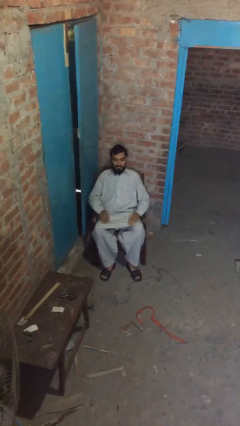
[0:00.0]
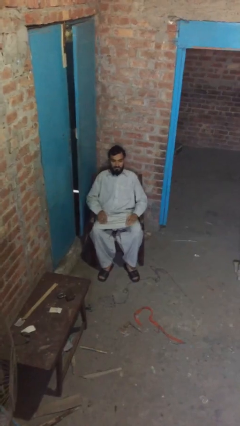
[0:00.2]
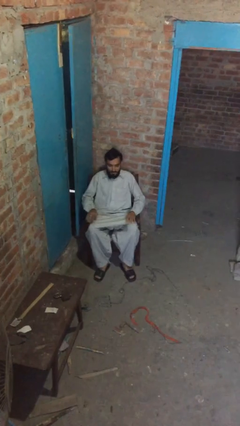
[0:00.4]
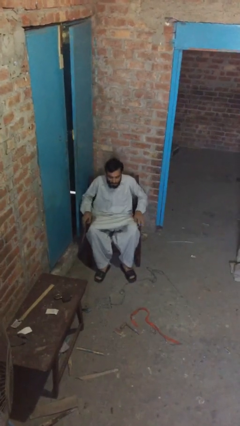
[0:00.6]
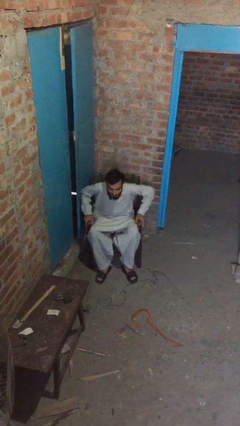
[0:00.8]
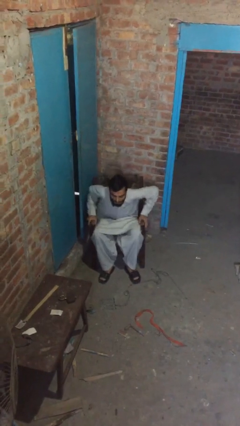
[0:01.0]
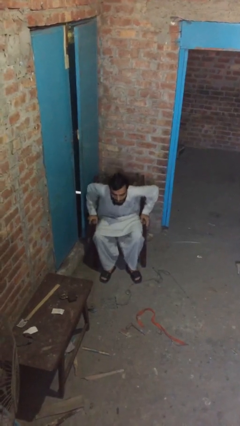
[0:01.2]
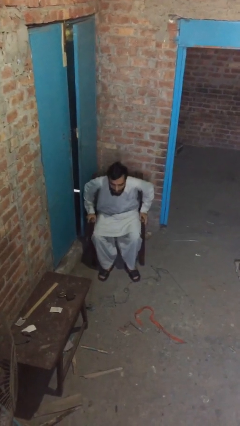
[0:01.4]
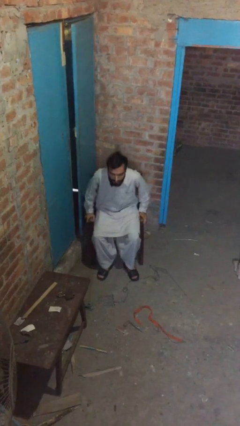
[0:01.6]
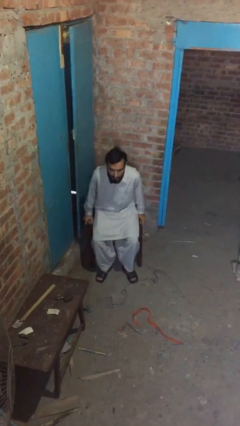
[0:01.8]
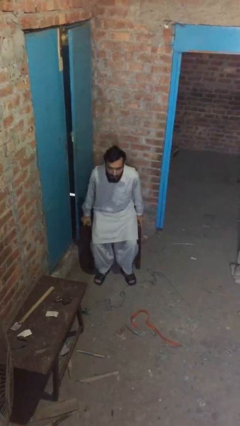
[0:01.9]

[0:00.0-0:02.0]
person stands up

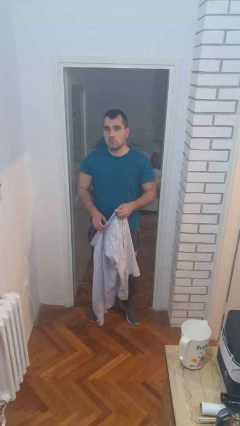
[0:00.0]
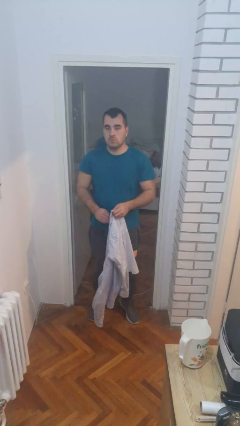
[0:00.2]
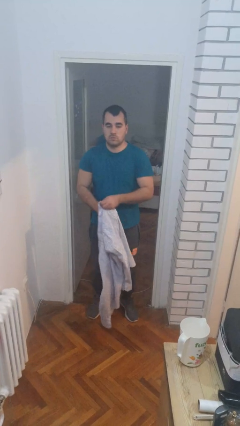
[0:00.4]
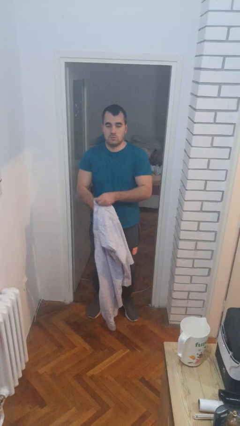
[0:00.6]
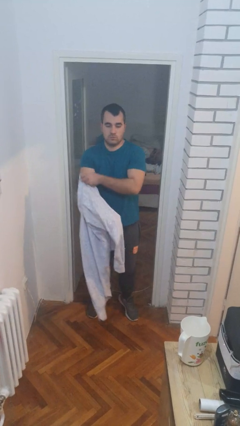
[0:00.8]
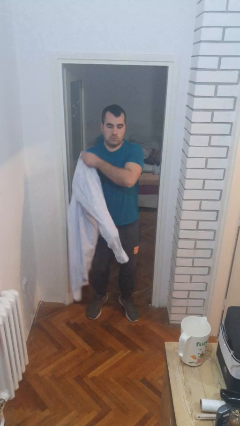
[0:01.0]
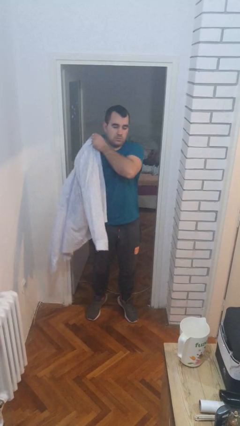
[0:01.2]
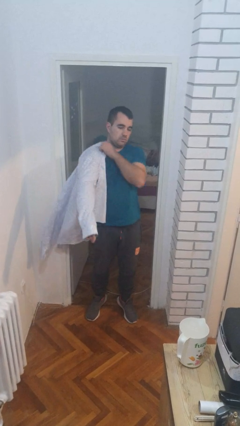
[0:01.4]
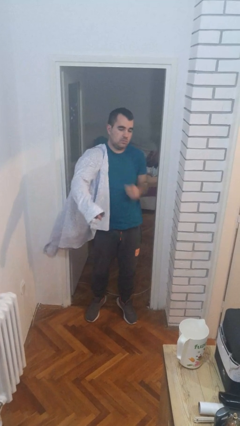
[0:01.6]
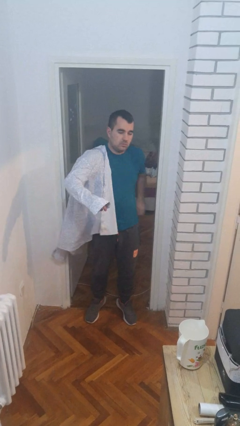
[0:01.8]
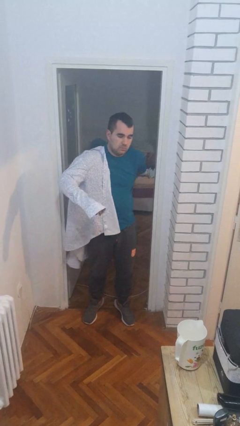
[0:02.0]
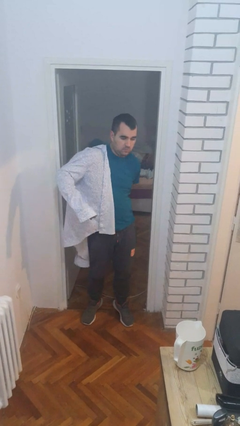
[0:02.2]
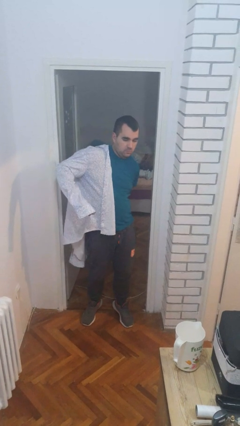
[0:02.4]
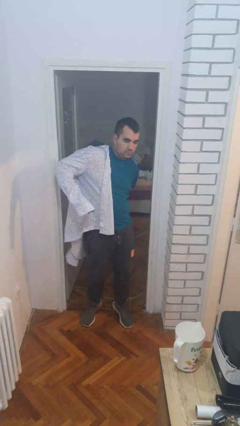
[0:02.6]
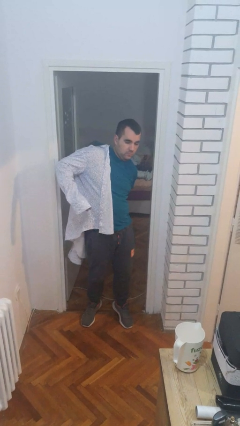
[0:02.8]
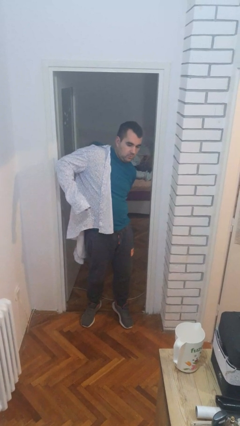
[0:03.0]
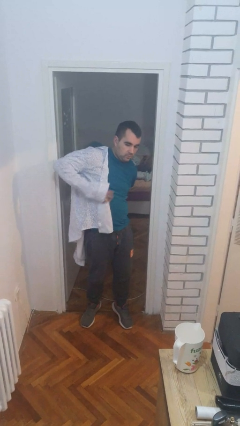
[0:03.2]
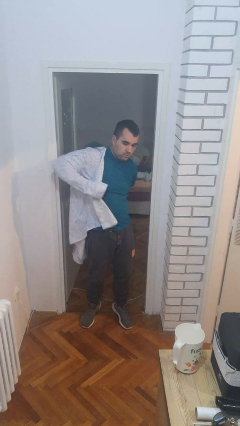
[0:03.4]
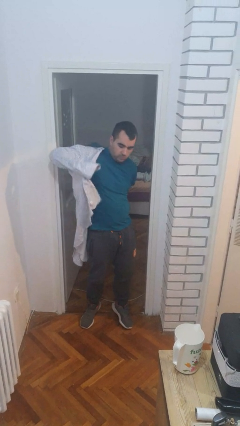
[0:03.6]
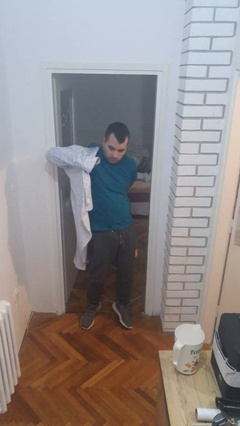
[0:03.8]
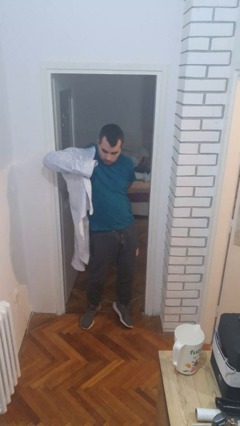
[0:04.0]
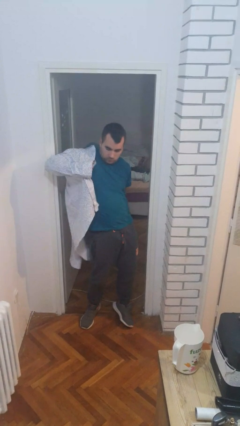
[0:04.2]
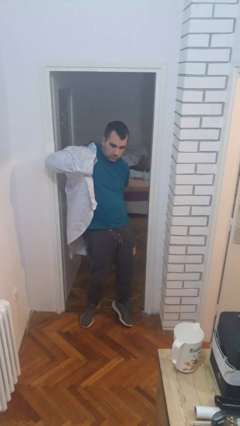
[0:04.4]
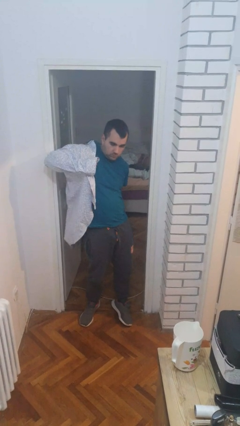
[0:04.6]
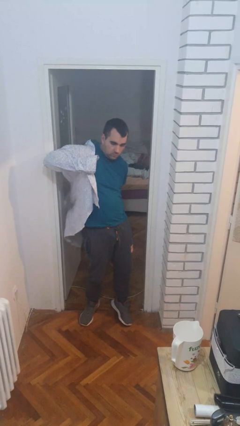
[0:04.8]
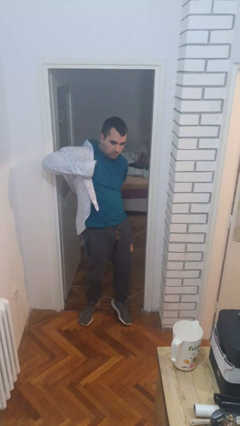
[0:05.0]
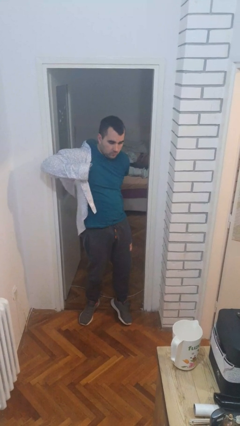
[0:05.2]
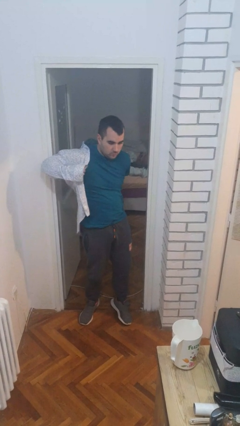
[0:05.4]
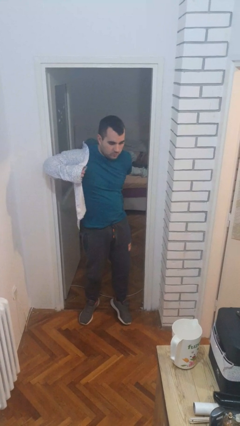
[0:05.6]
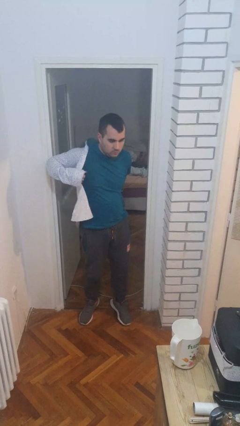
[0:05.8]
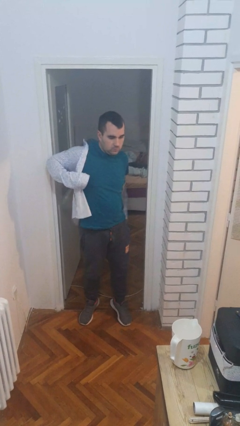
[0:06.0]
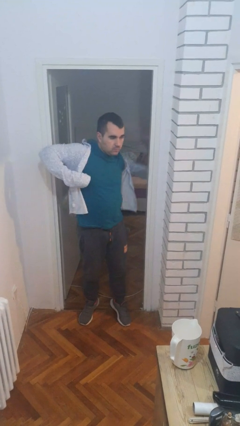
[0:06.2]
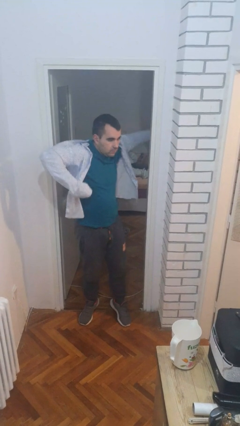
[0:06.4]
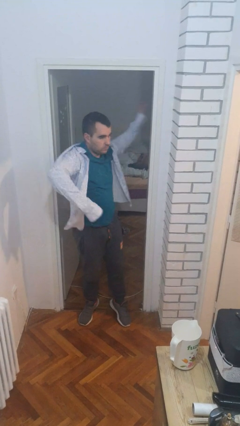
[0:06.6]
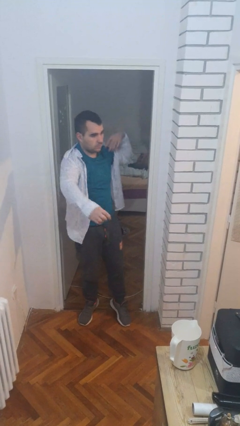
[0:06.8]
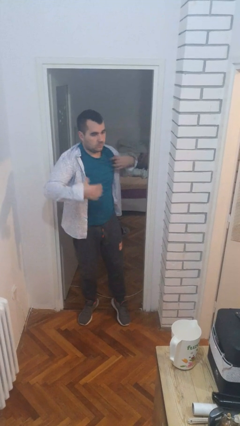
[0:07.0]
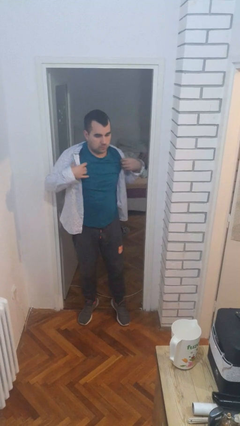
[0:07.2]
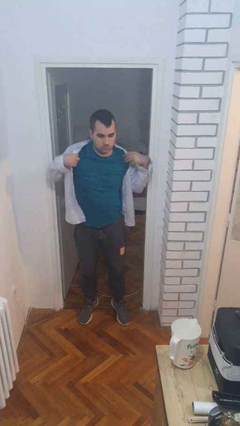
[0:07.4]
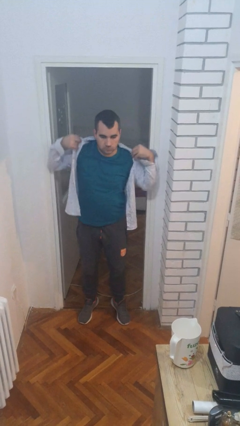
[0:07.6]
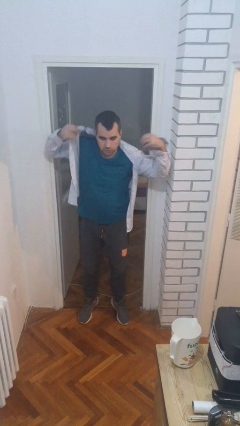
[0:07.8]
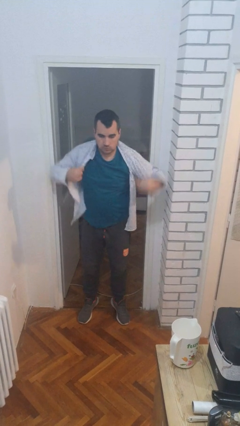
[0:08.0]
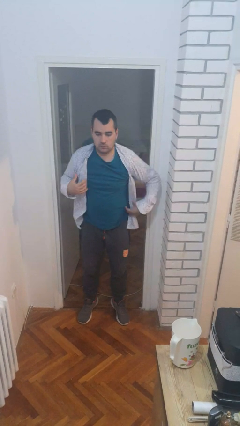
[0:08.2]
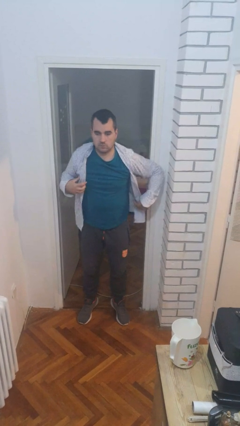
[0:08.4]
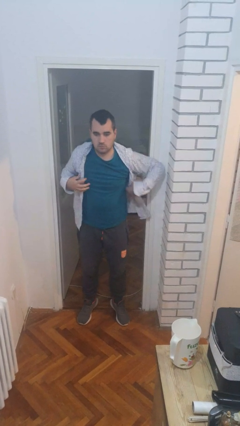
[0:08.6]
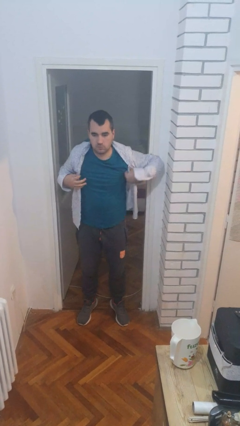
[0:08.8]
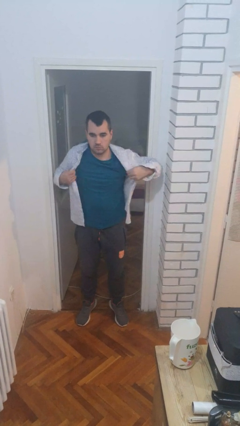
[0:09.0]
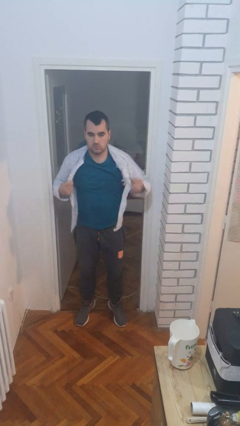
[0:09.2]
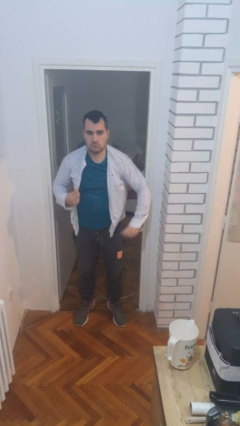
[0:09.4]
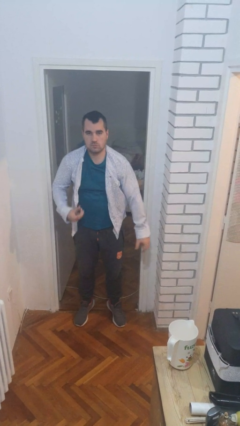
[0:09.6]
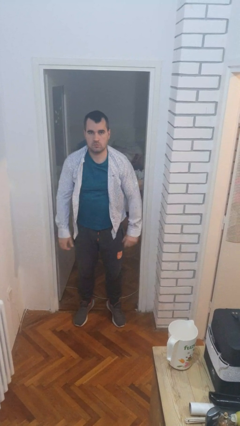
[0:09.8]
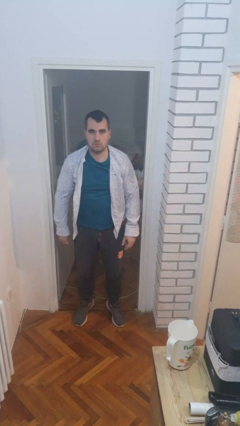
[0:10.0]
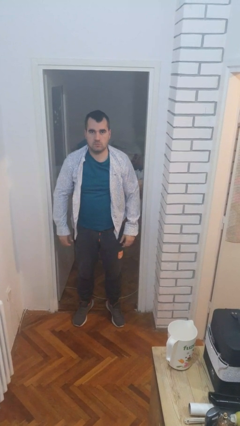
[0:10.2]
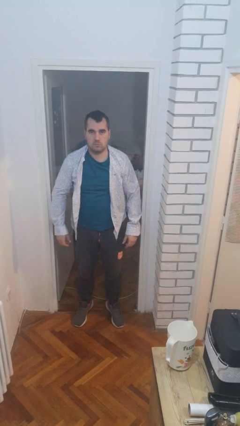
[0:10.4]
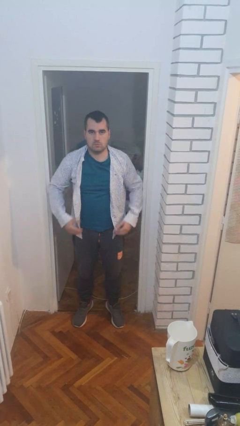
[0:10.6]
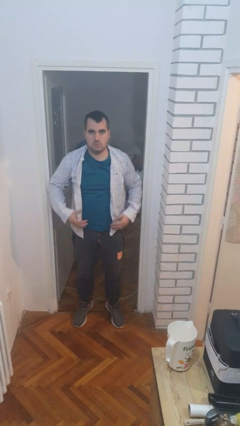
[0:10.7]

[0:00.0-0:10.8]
person puts on shirt

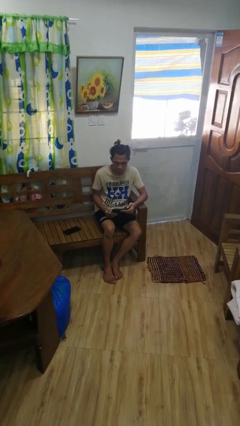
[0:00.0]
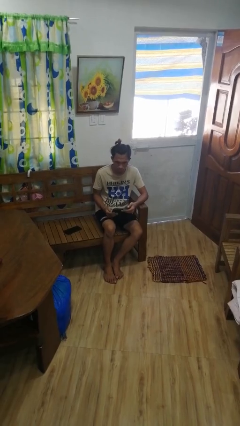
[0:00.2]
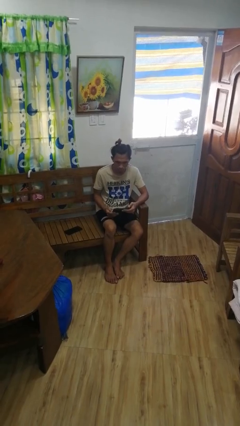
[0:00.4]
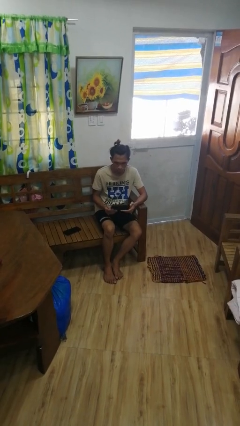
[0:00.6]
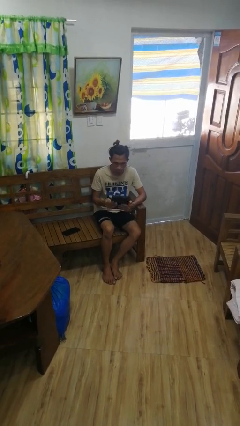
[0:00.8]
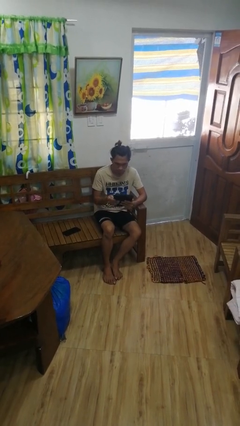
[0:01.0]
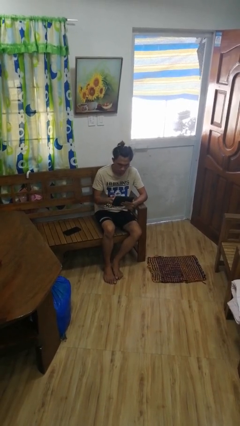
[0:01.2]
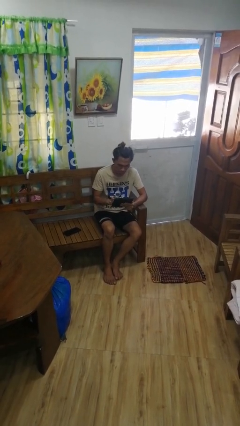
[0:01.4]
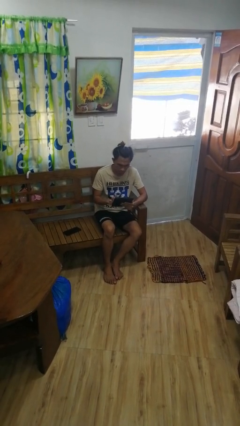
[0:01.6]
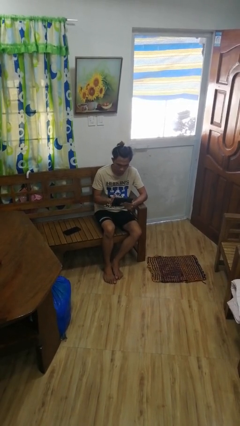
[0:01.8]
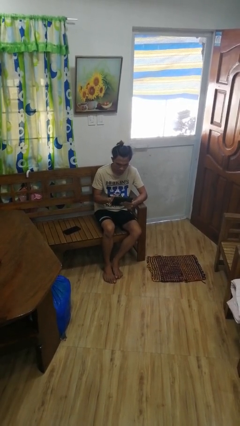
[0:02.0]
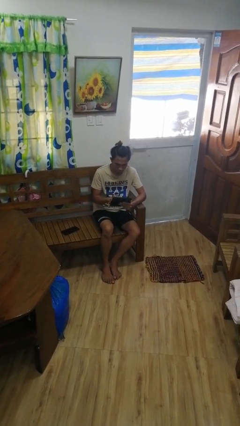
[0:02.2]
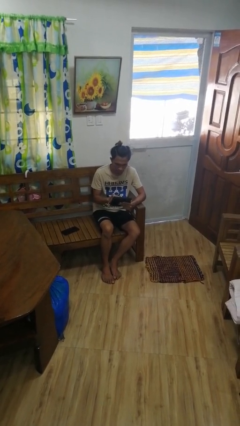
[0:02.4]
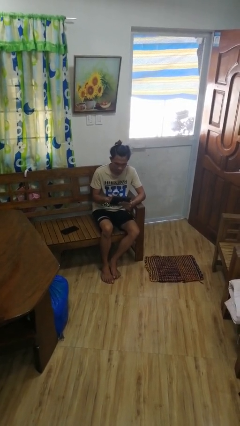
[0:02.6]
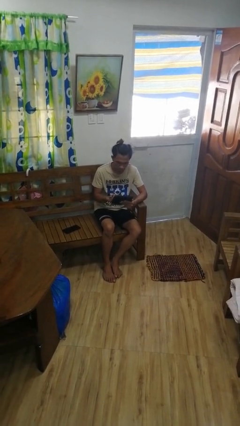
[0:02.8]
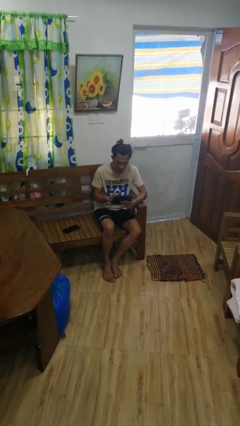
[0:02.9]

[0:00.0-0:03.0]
person interacts with tablet

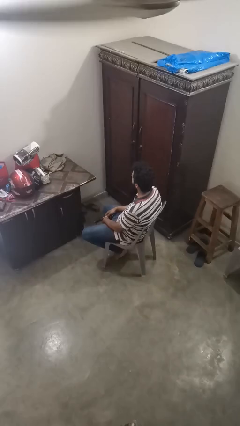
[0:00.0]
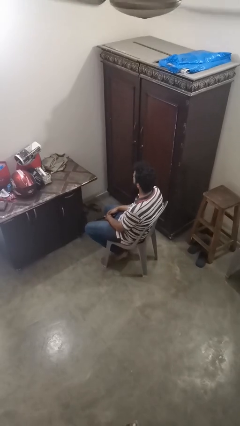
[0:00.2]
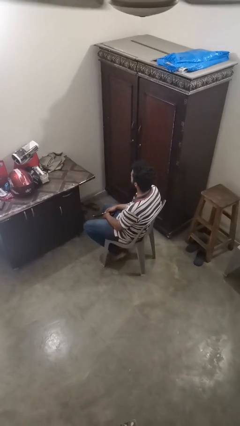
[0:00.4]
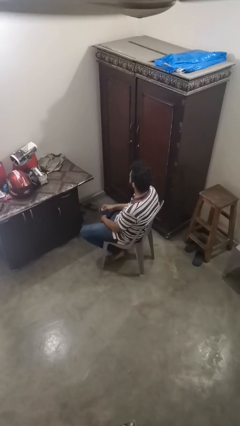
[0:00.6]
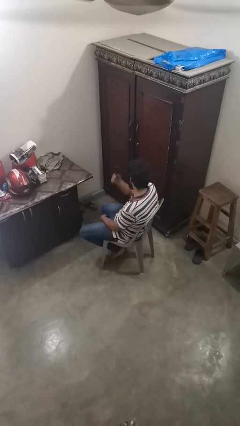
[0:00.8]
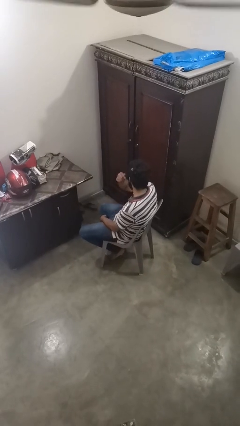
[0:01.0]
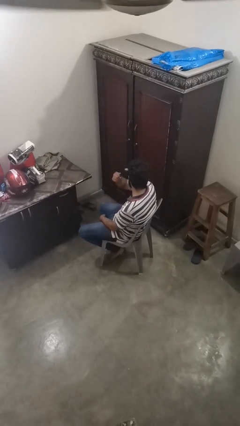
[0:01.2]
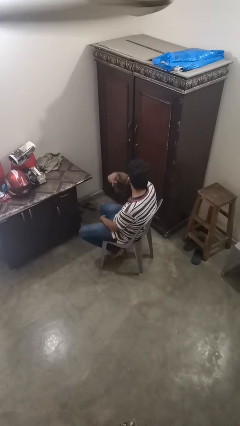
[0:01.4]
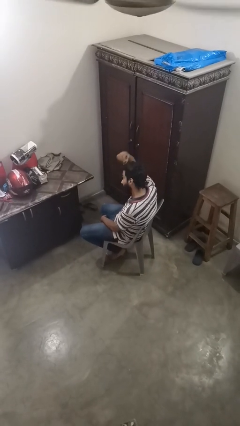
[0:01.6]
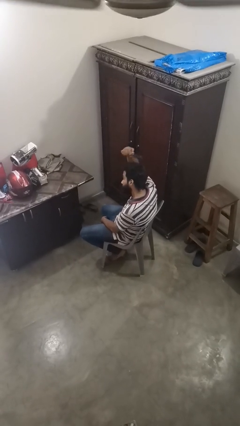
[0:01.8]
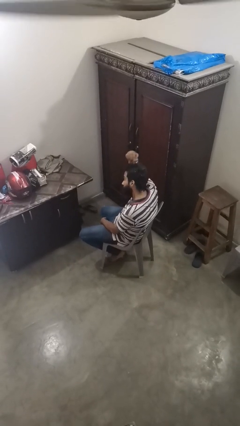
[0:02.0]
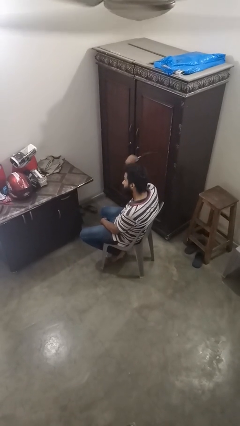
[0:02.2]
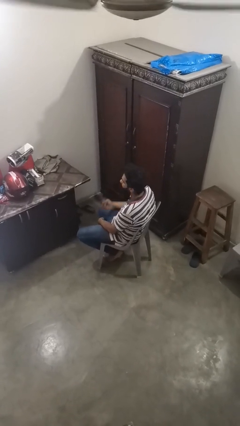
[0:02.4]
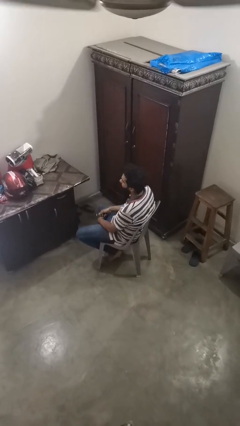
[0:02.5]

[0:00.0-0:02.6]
person brushes hair
